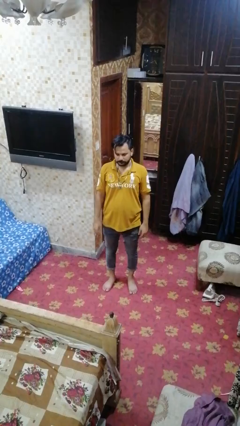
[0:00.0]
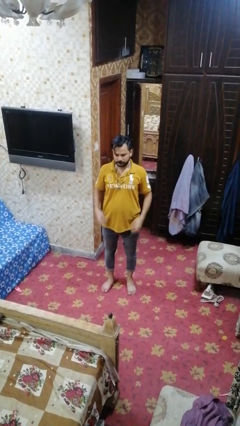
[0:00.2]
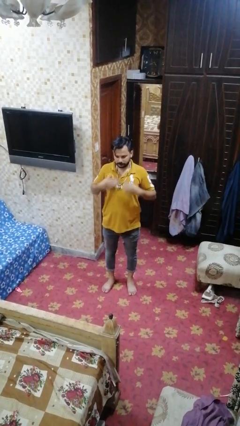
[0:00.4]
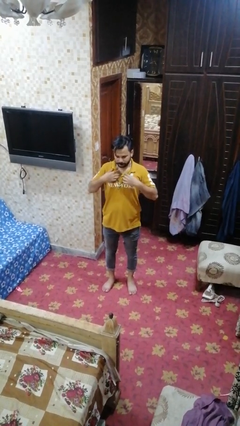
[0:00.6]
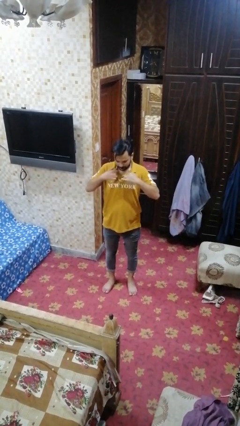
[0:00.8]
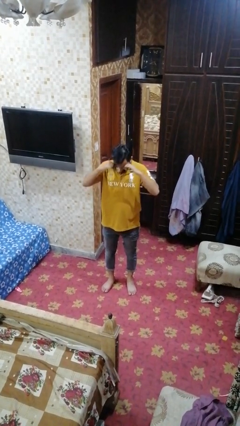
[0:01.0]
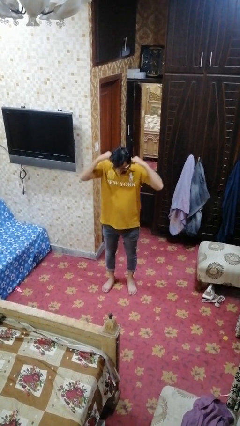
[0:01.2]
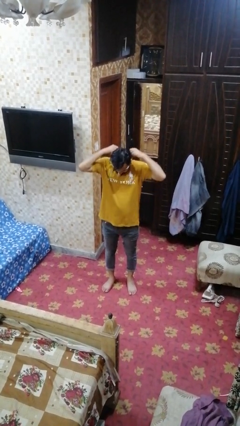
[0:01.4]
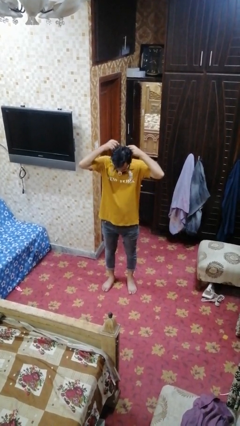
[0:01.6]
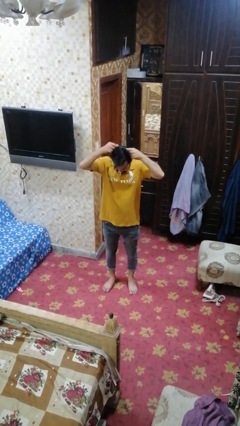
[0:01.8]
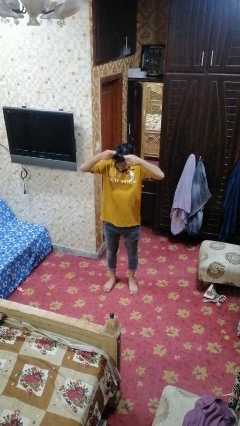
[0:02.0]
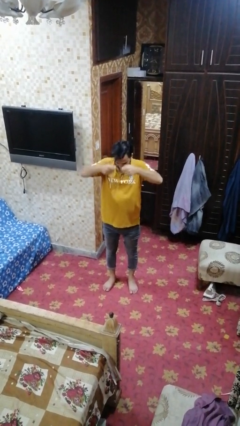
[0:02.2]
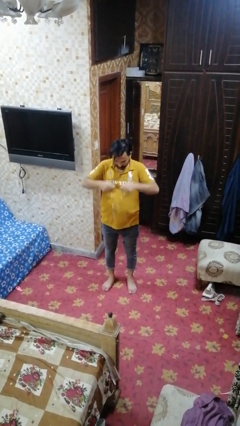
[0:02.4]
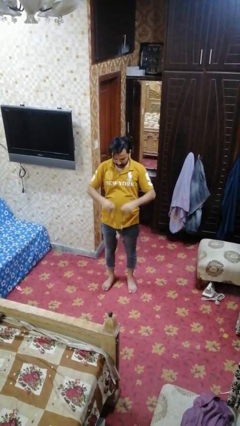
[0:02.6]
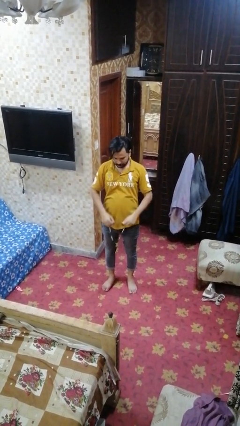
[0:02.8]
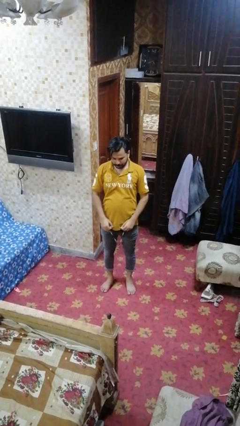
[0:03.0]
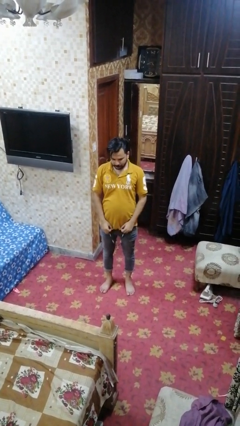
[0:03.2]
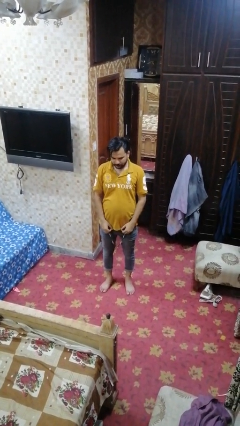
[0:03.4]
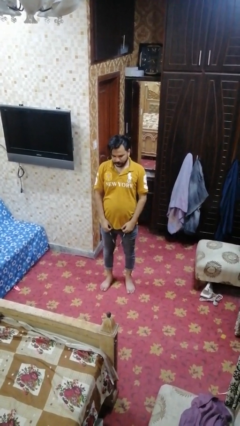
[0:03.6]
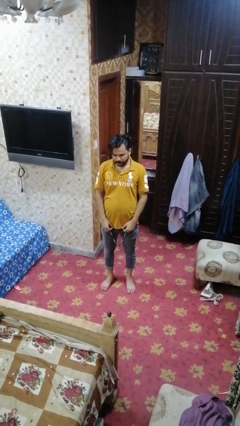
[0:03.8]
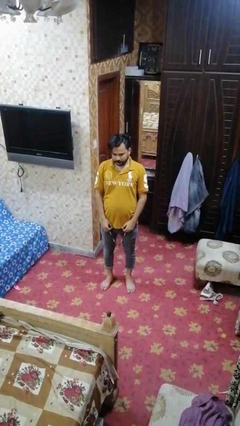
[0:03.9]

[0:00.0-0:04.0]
person takes off necklace

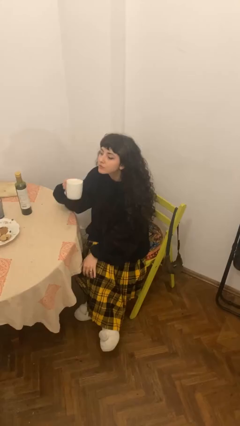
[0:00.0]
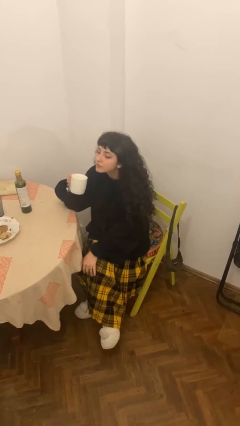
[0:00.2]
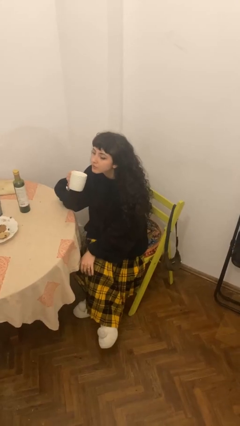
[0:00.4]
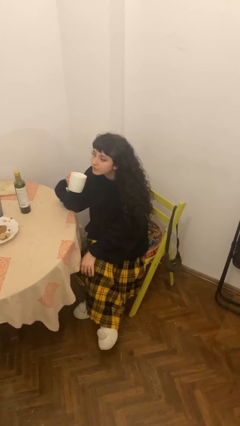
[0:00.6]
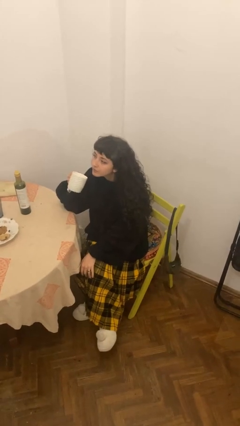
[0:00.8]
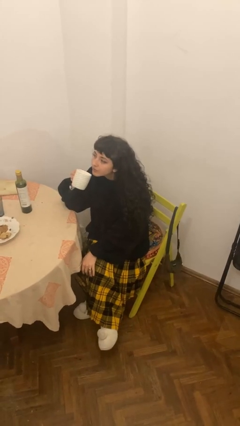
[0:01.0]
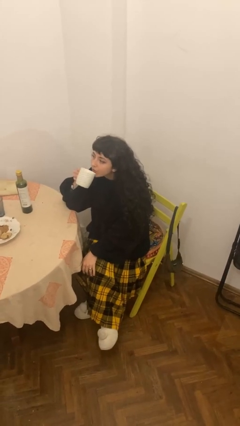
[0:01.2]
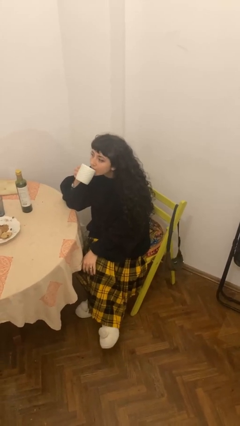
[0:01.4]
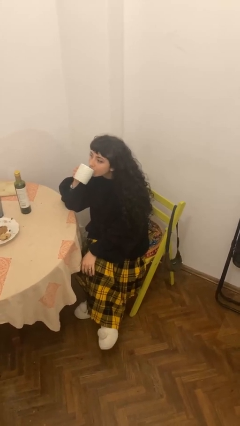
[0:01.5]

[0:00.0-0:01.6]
person picks up object from table

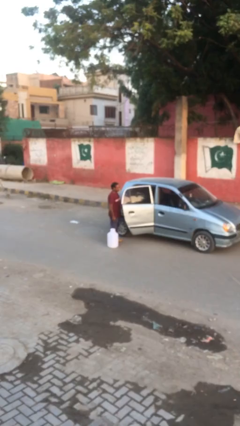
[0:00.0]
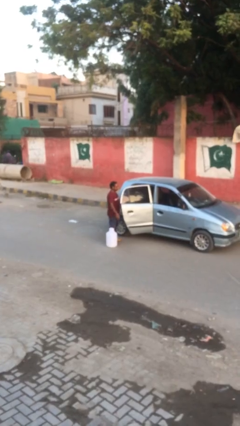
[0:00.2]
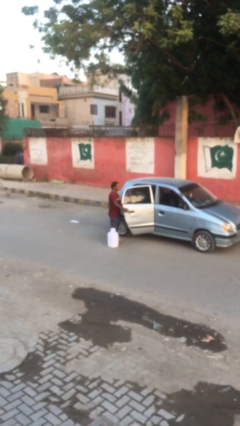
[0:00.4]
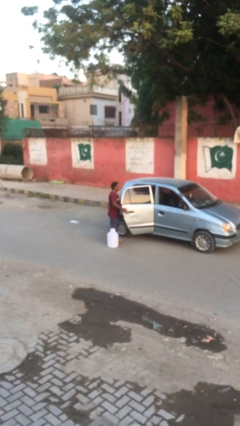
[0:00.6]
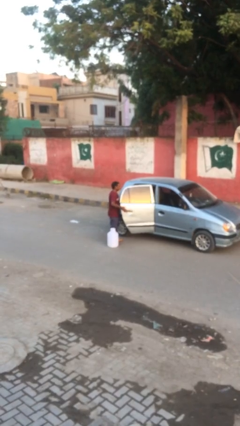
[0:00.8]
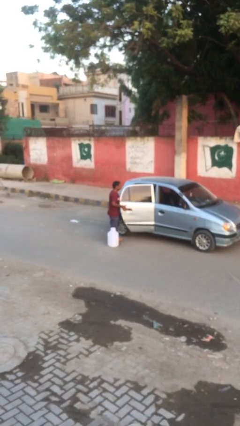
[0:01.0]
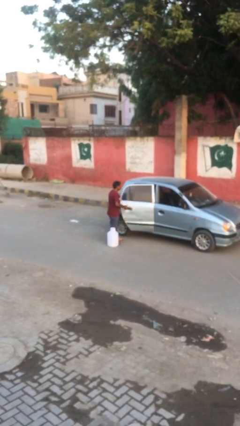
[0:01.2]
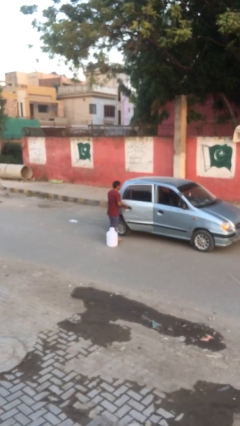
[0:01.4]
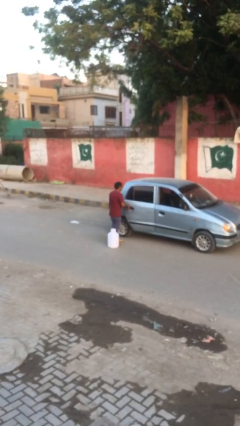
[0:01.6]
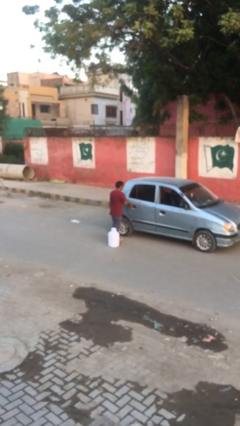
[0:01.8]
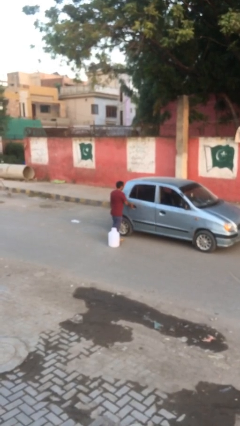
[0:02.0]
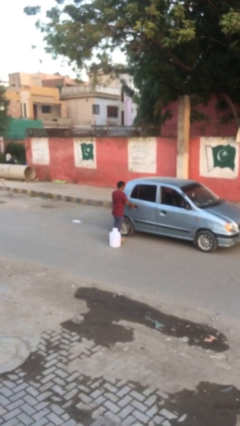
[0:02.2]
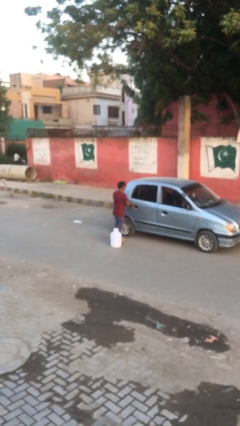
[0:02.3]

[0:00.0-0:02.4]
person closes car door

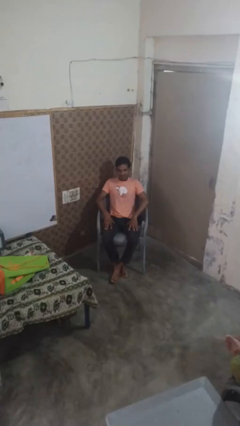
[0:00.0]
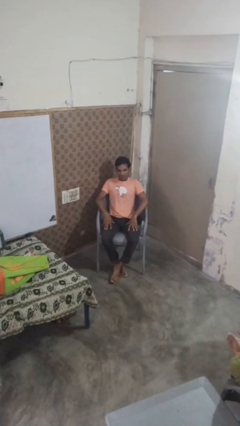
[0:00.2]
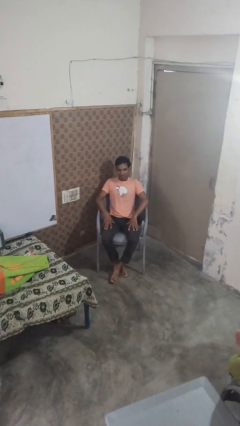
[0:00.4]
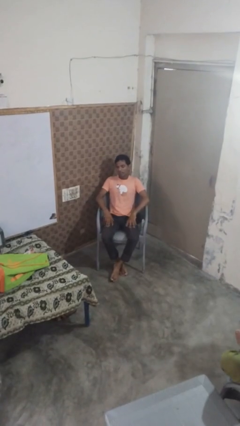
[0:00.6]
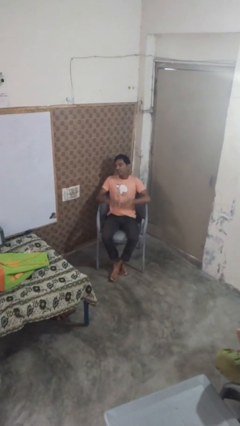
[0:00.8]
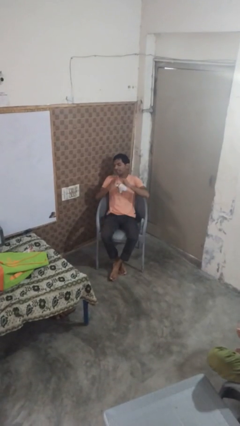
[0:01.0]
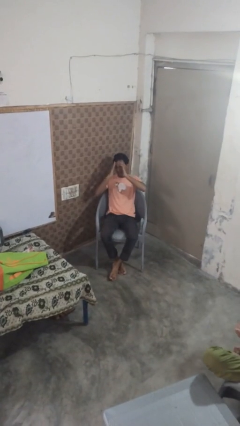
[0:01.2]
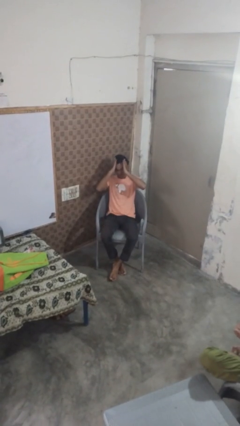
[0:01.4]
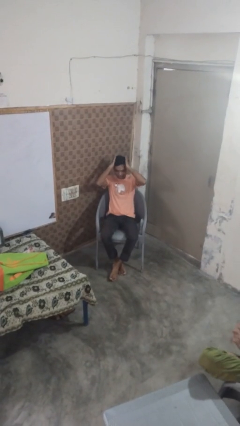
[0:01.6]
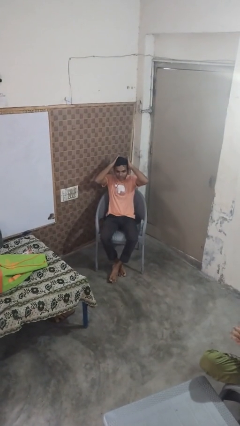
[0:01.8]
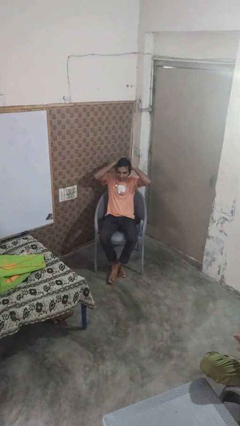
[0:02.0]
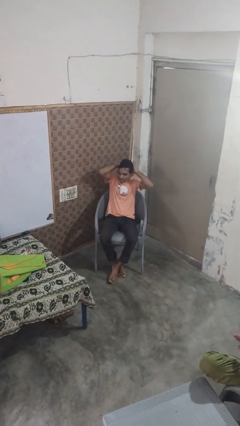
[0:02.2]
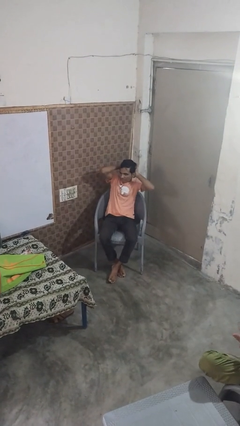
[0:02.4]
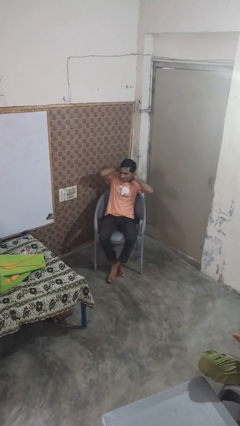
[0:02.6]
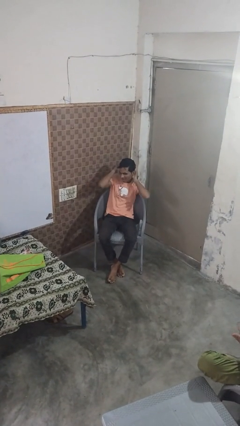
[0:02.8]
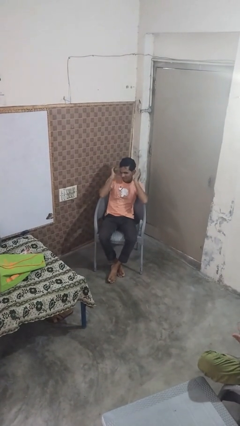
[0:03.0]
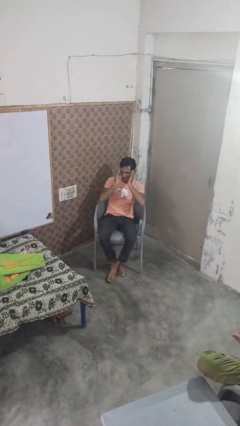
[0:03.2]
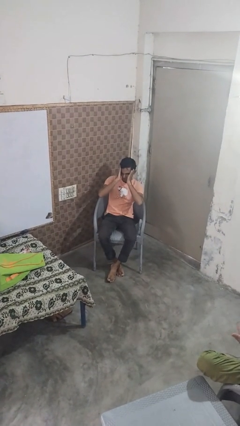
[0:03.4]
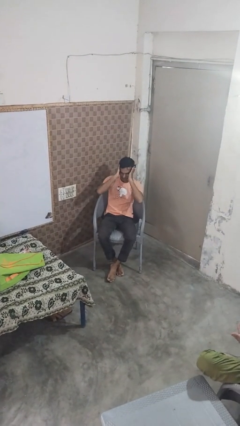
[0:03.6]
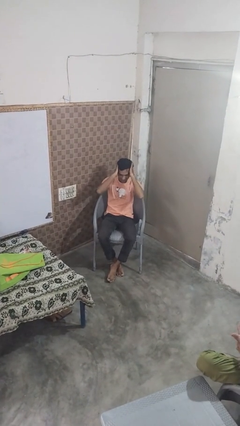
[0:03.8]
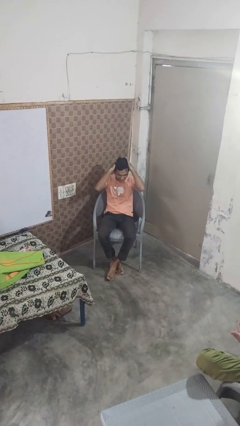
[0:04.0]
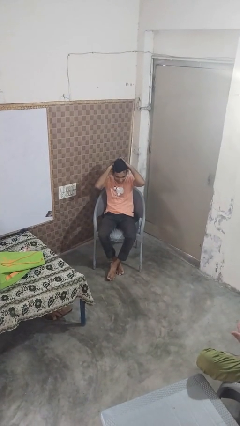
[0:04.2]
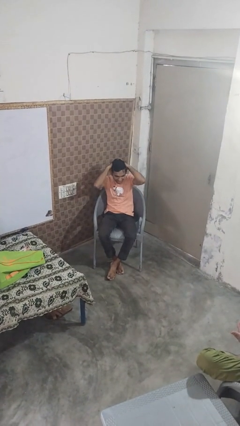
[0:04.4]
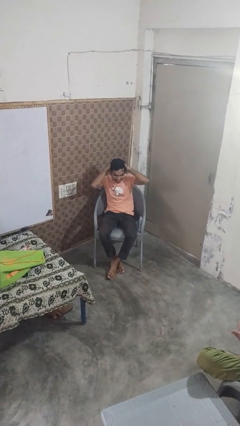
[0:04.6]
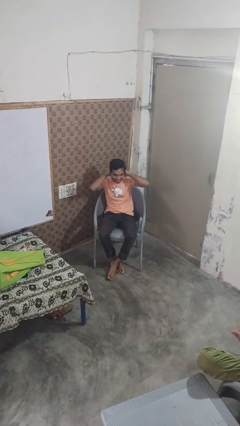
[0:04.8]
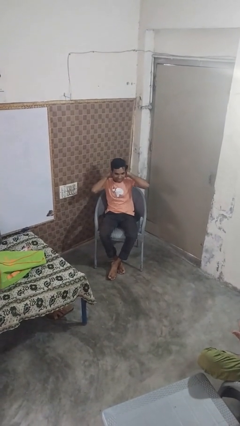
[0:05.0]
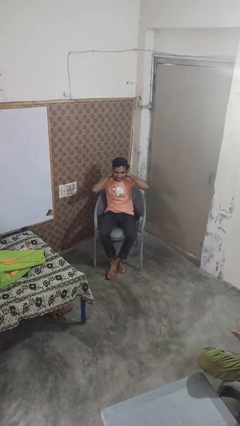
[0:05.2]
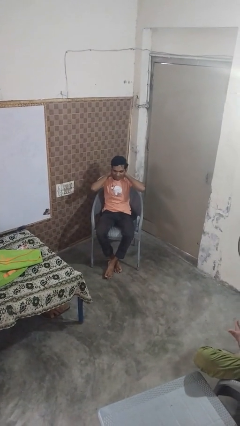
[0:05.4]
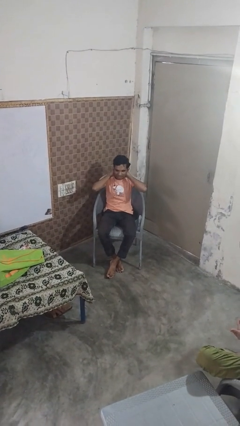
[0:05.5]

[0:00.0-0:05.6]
person strokes hair

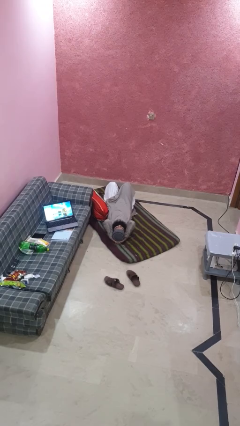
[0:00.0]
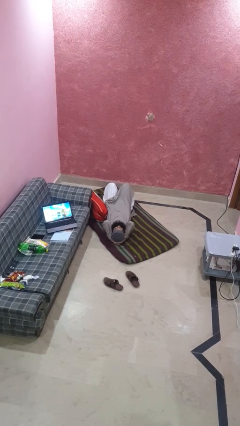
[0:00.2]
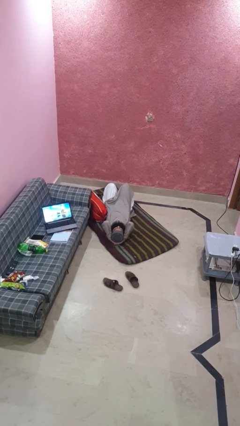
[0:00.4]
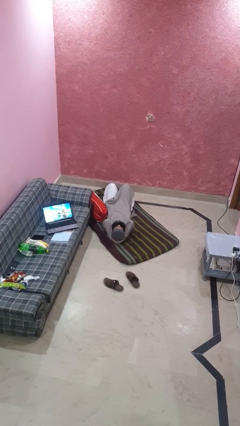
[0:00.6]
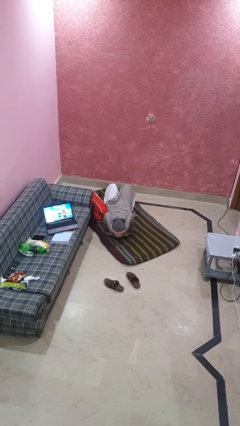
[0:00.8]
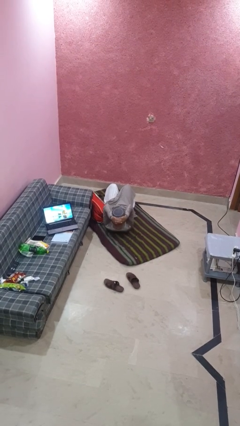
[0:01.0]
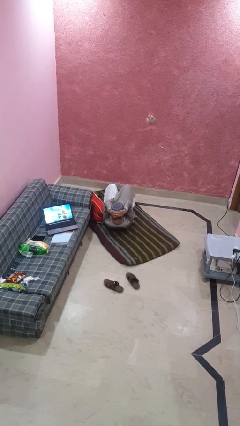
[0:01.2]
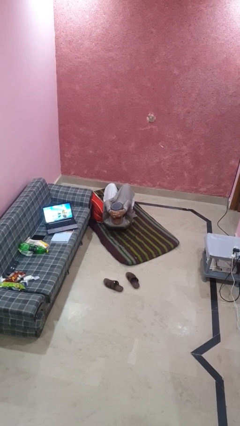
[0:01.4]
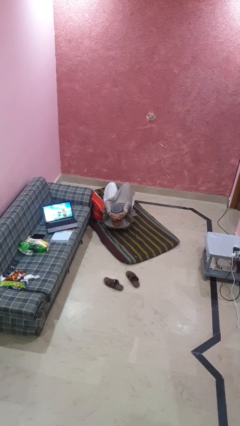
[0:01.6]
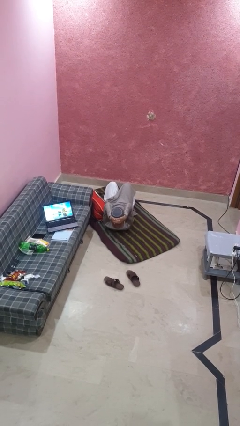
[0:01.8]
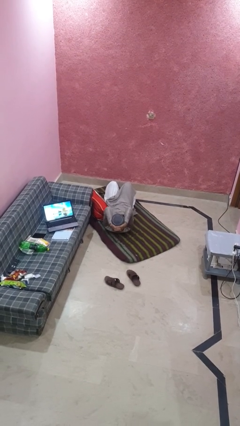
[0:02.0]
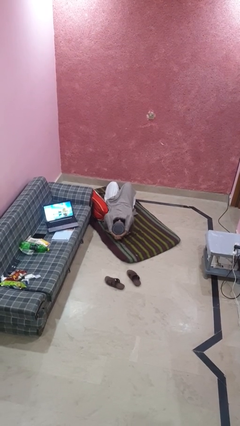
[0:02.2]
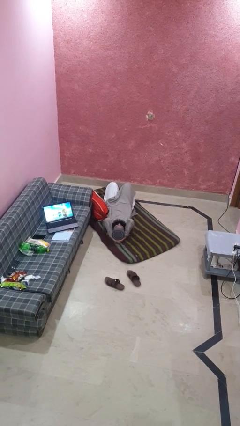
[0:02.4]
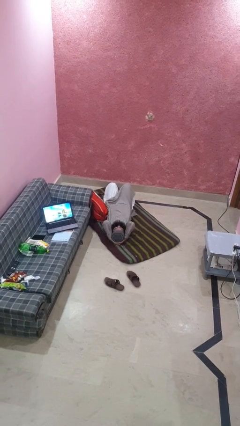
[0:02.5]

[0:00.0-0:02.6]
person exercises with situp

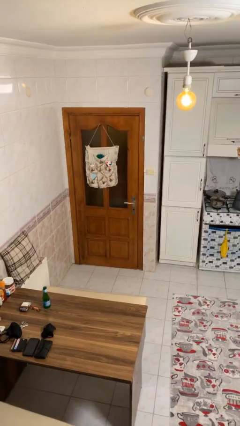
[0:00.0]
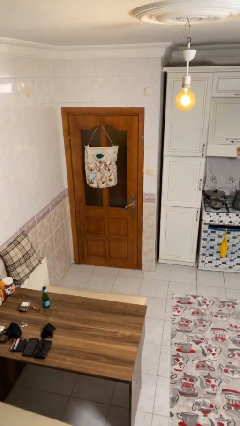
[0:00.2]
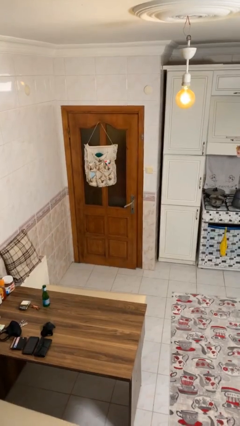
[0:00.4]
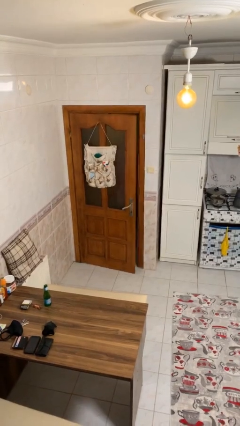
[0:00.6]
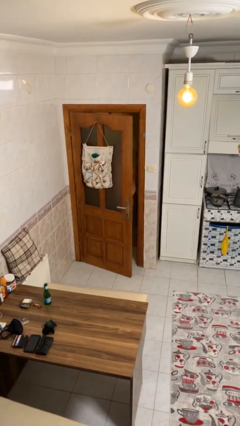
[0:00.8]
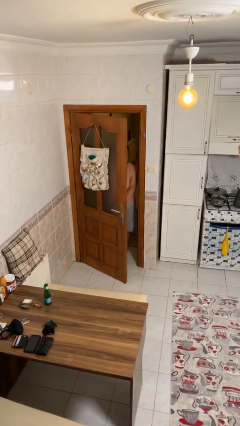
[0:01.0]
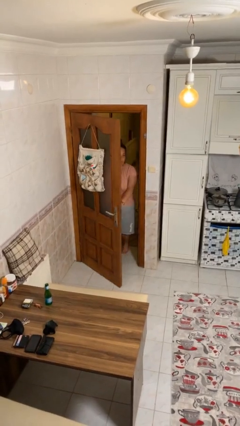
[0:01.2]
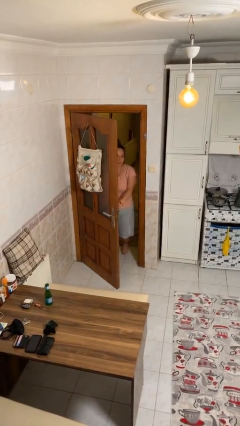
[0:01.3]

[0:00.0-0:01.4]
person opens facility door
